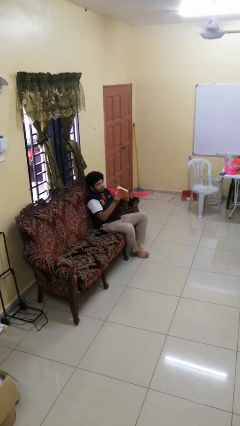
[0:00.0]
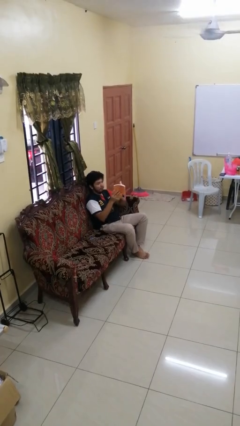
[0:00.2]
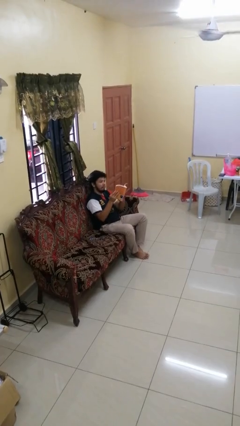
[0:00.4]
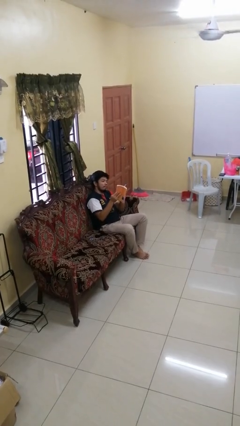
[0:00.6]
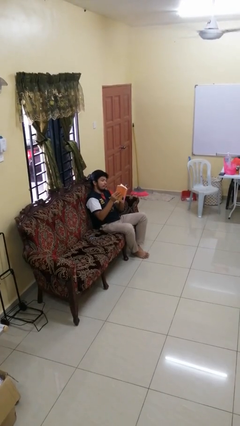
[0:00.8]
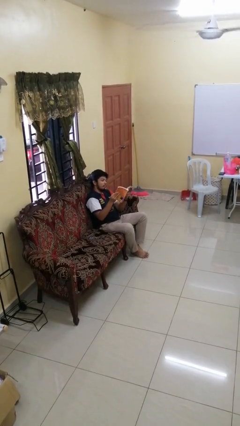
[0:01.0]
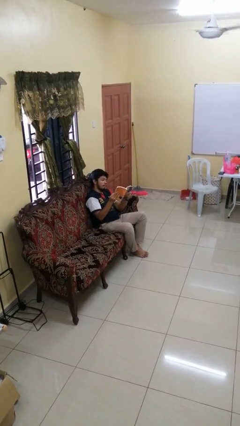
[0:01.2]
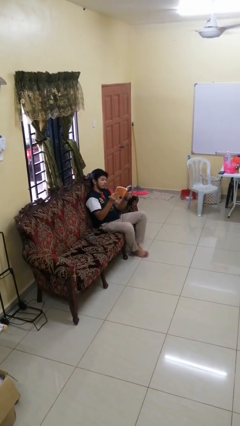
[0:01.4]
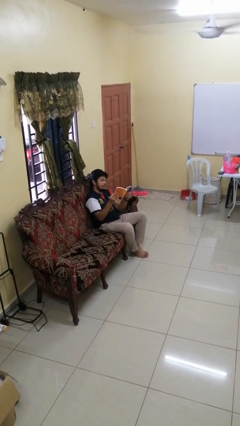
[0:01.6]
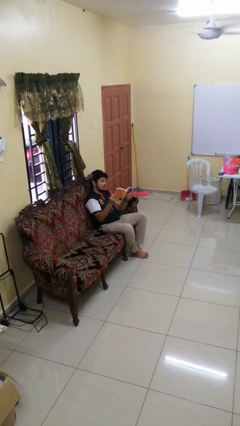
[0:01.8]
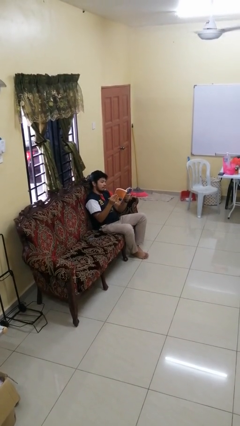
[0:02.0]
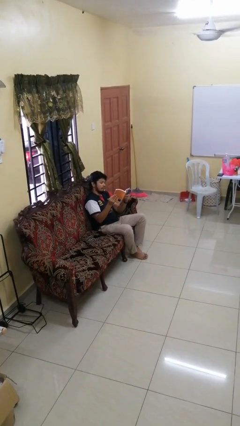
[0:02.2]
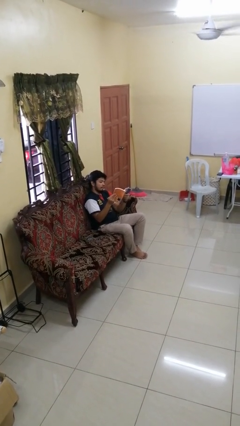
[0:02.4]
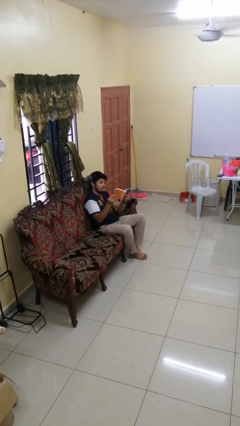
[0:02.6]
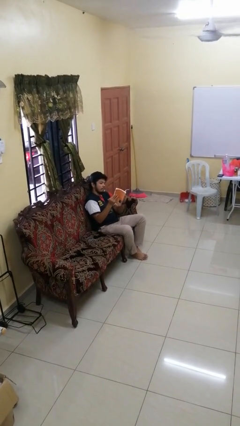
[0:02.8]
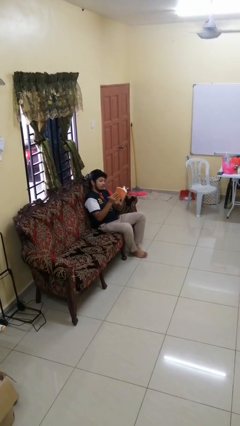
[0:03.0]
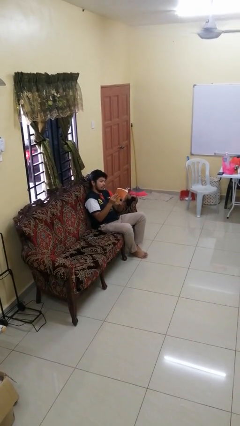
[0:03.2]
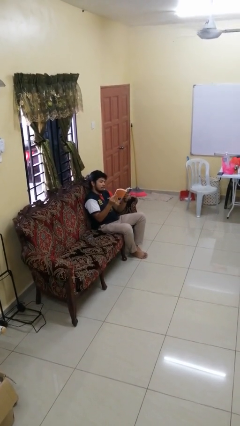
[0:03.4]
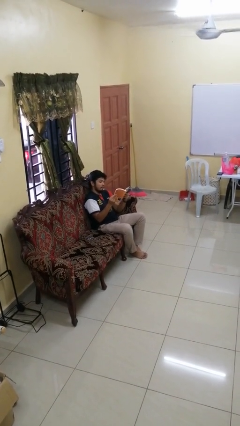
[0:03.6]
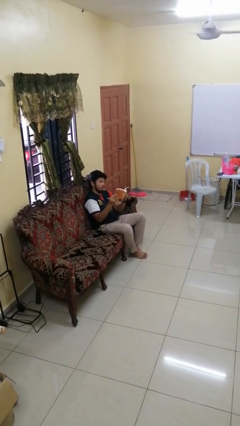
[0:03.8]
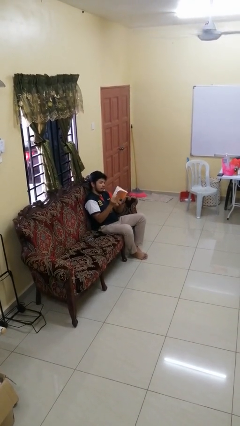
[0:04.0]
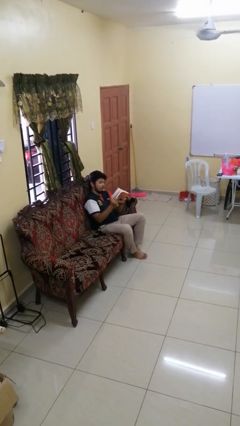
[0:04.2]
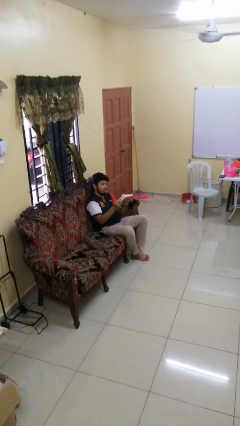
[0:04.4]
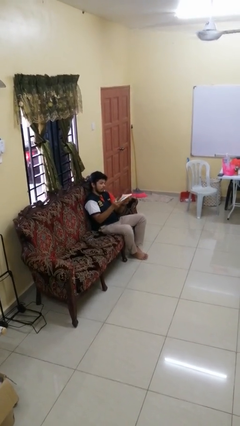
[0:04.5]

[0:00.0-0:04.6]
person reads book

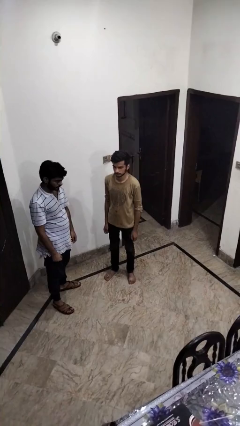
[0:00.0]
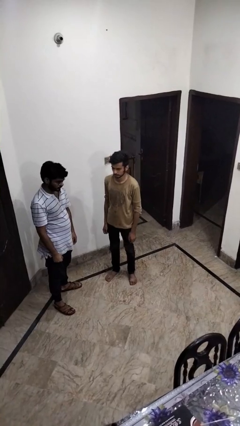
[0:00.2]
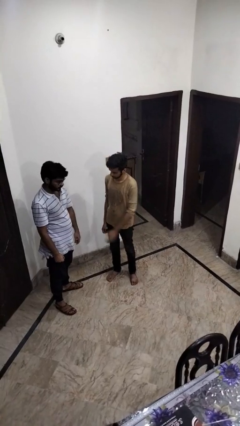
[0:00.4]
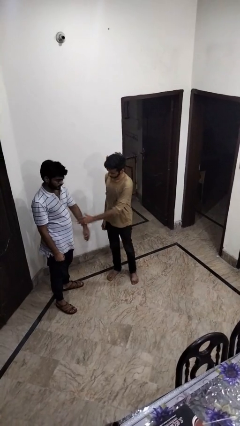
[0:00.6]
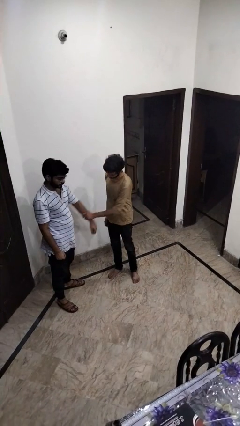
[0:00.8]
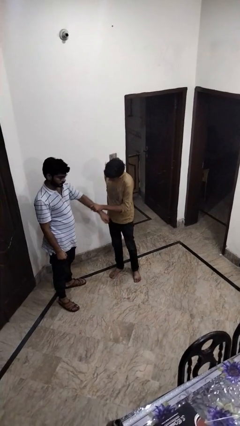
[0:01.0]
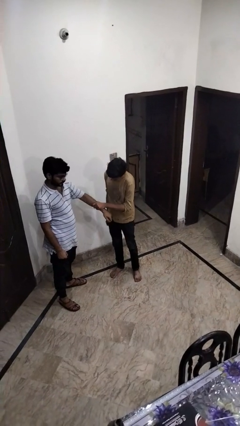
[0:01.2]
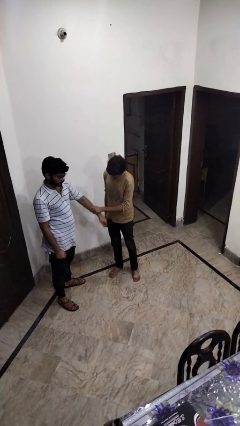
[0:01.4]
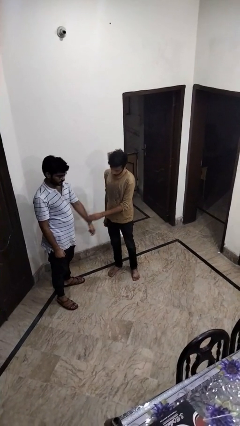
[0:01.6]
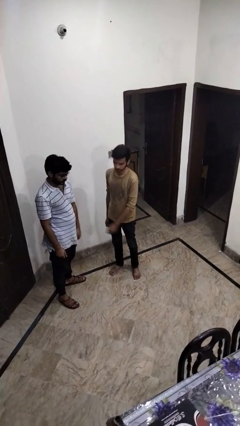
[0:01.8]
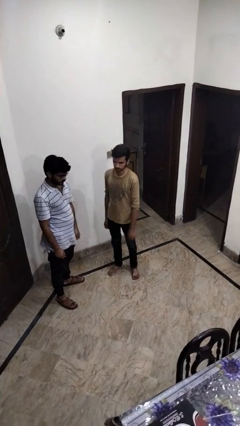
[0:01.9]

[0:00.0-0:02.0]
person grabs person by forearm

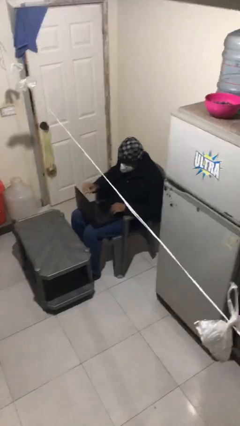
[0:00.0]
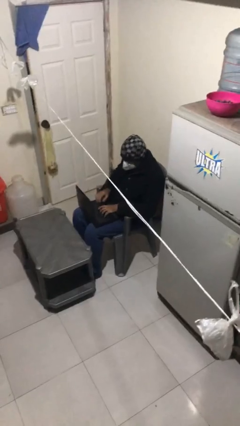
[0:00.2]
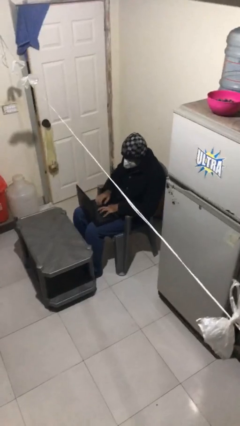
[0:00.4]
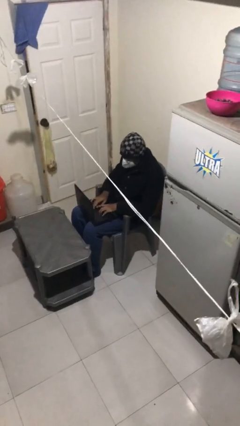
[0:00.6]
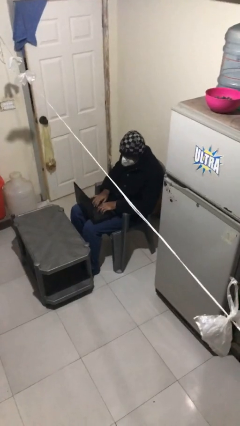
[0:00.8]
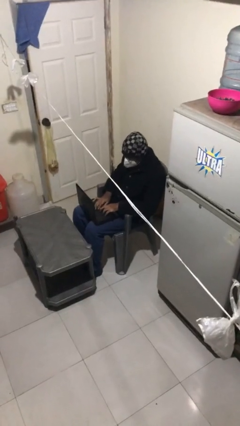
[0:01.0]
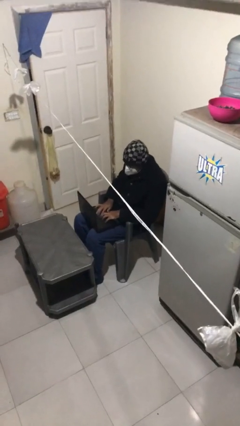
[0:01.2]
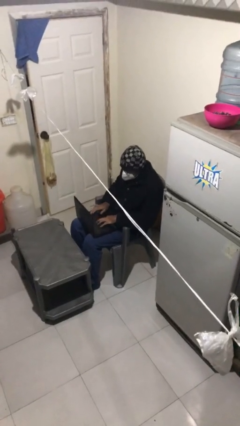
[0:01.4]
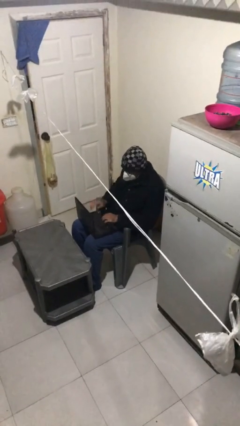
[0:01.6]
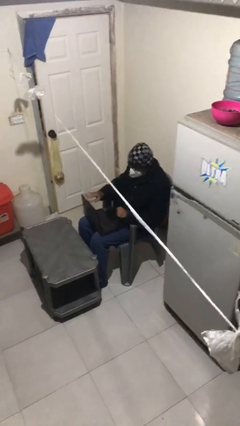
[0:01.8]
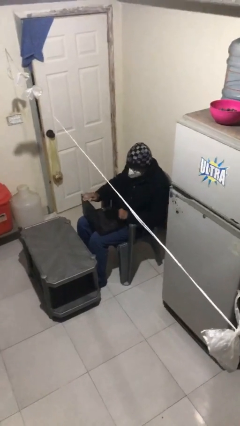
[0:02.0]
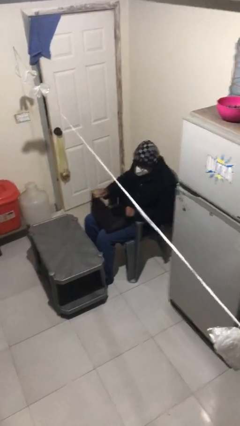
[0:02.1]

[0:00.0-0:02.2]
person interacts with laptop

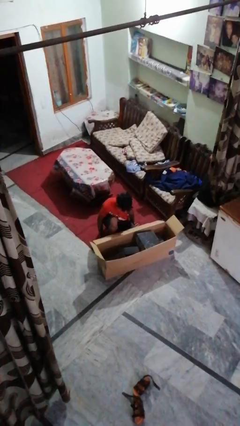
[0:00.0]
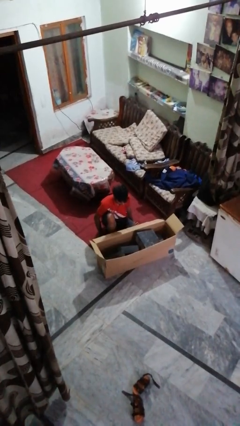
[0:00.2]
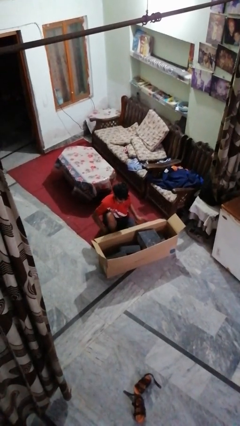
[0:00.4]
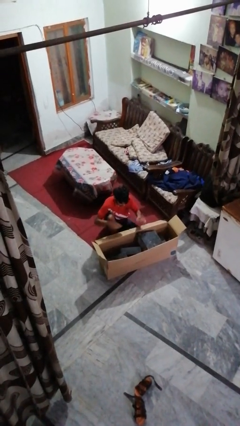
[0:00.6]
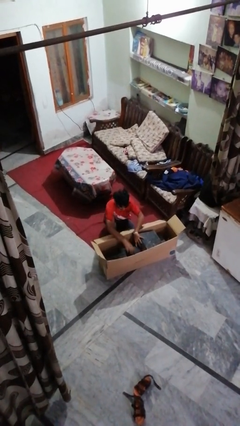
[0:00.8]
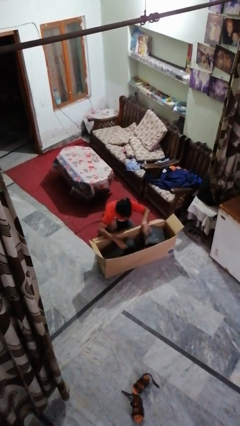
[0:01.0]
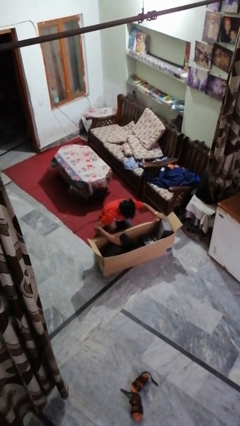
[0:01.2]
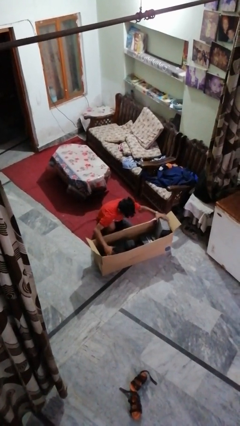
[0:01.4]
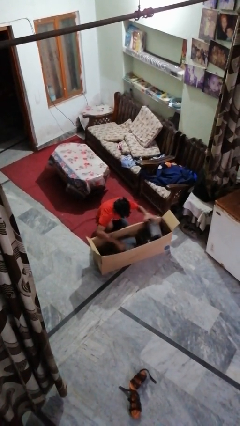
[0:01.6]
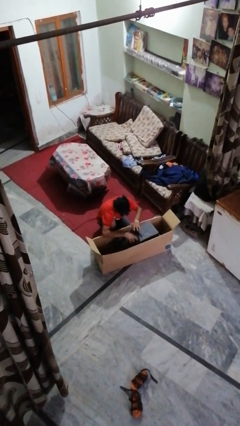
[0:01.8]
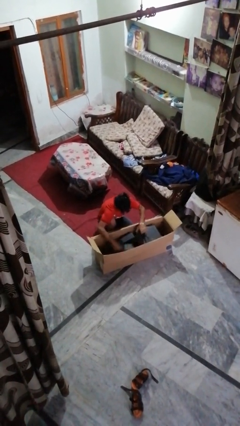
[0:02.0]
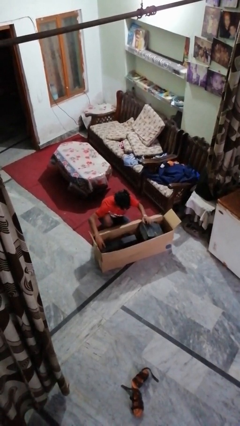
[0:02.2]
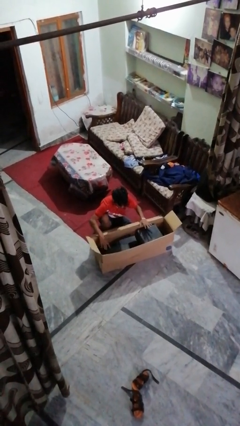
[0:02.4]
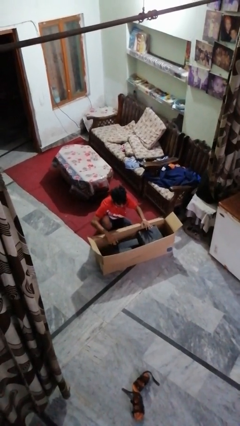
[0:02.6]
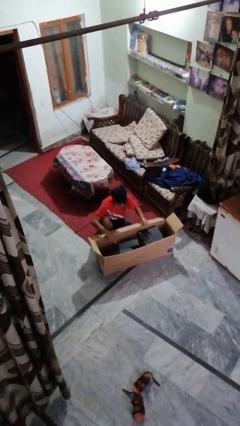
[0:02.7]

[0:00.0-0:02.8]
person searches in box

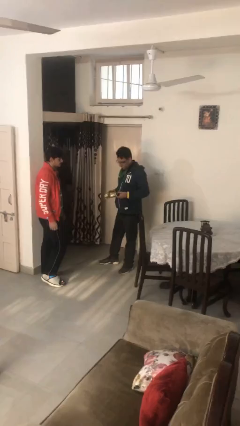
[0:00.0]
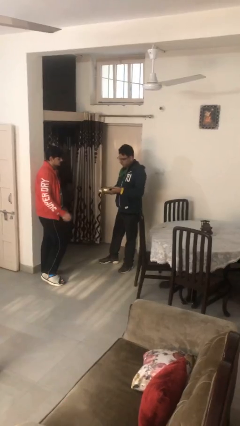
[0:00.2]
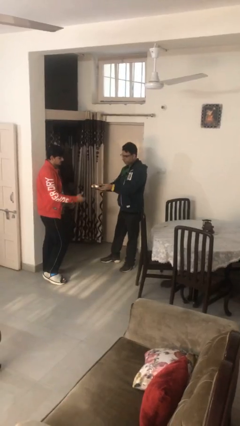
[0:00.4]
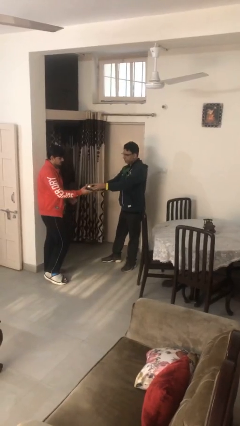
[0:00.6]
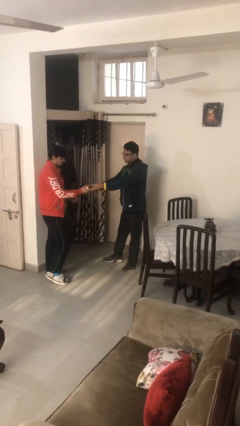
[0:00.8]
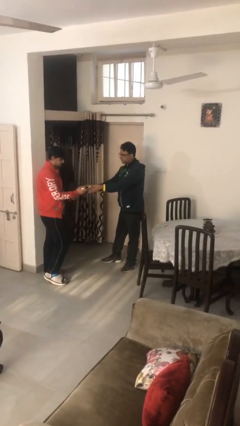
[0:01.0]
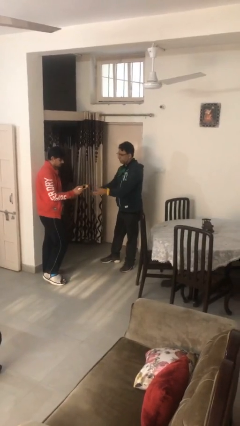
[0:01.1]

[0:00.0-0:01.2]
person transfers object to person

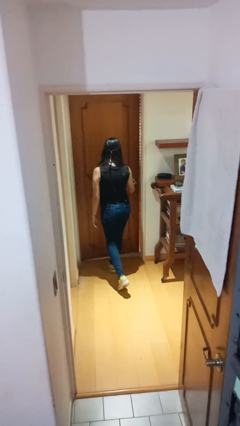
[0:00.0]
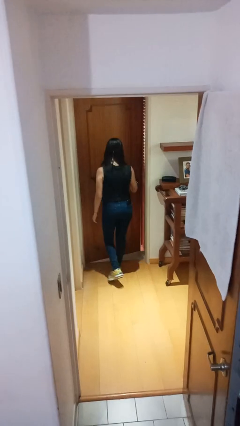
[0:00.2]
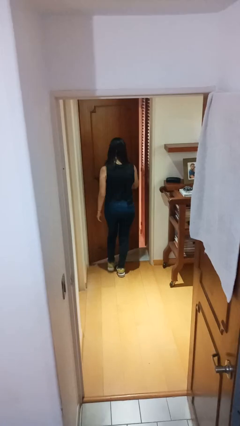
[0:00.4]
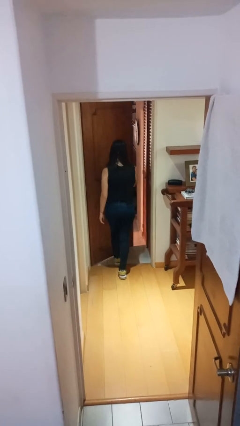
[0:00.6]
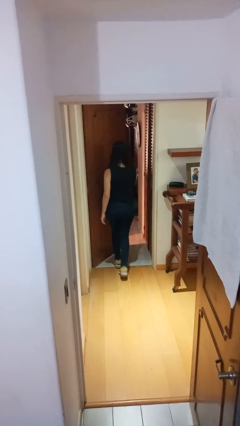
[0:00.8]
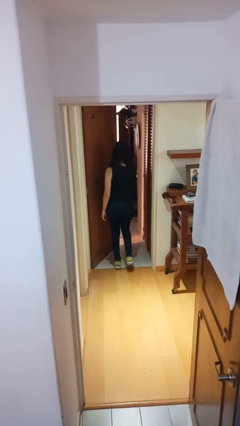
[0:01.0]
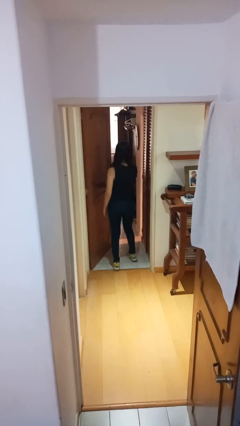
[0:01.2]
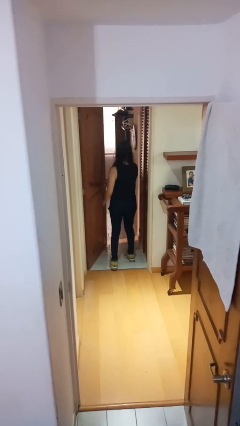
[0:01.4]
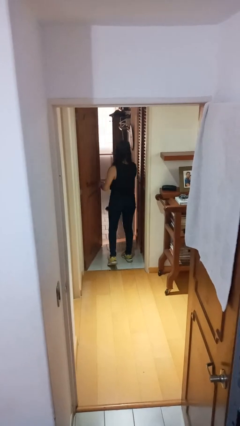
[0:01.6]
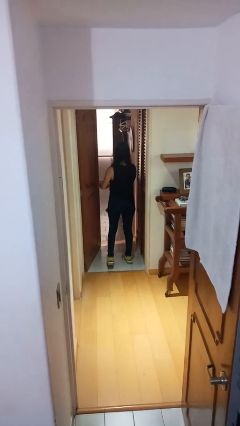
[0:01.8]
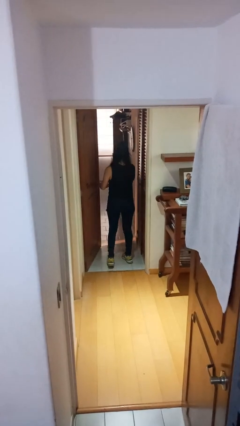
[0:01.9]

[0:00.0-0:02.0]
person opens facility door

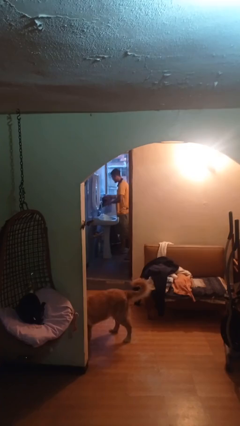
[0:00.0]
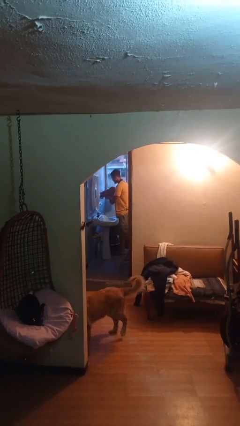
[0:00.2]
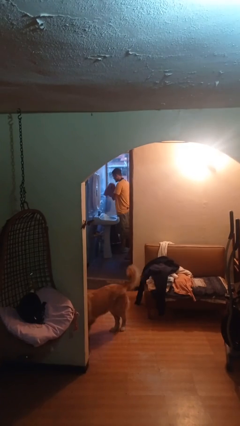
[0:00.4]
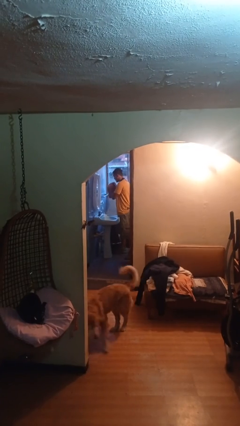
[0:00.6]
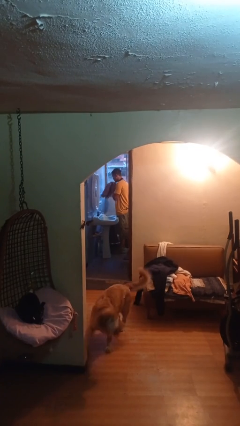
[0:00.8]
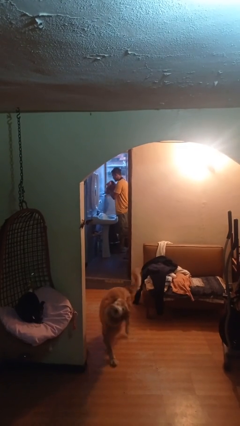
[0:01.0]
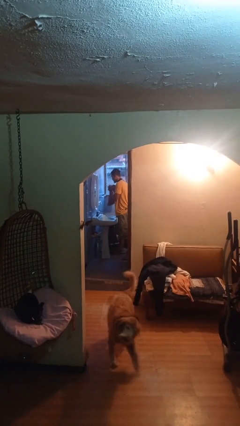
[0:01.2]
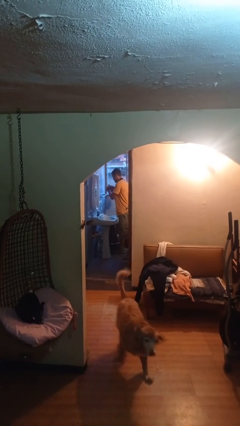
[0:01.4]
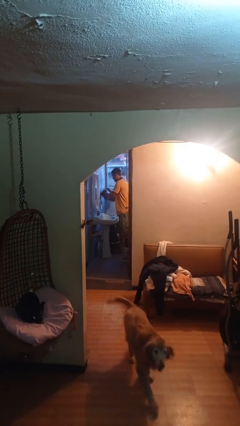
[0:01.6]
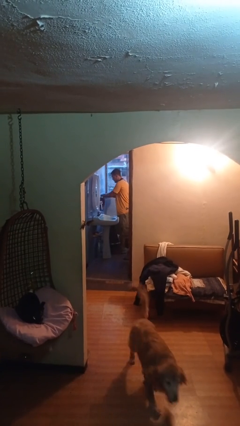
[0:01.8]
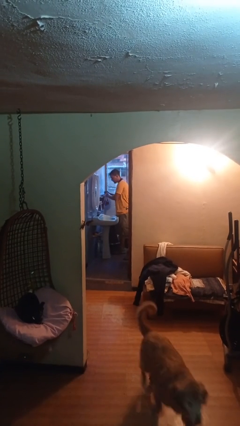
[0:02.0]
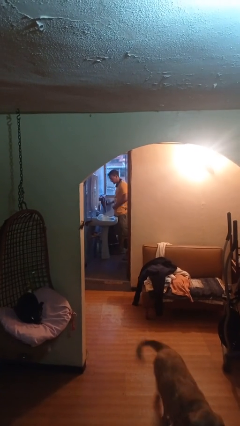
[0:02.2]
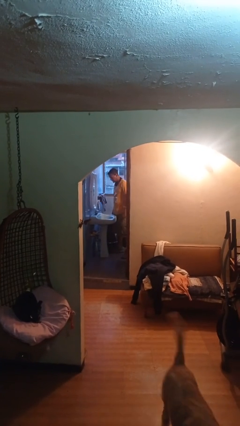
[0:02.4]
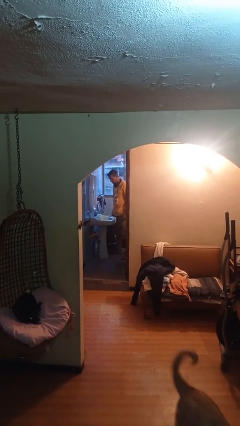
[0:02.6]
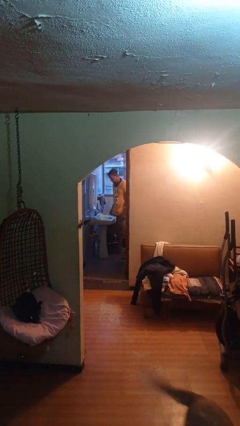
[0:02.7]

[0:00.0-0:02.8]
person dries hands with towel
